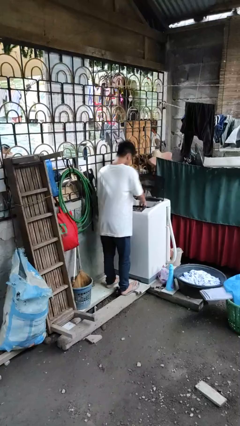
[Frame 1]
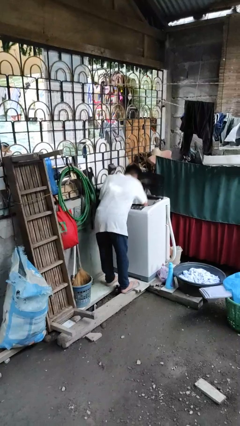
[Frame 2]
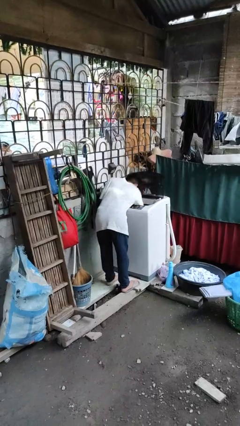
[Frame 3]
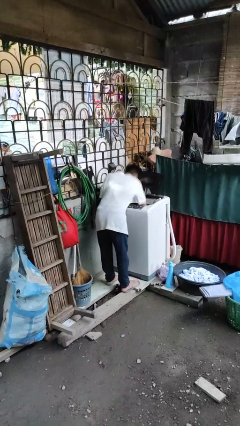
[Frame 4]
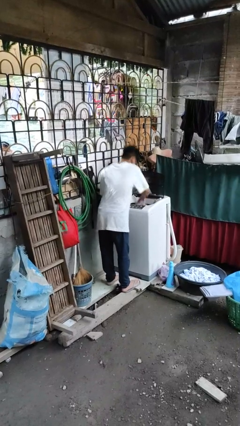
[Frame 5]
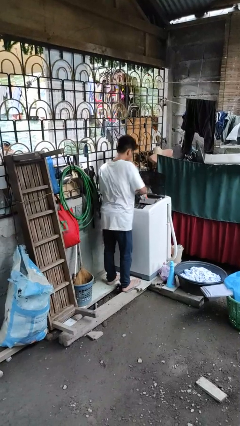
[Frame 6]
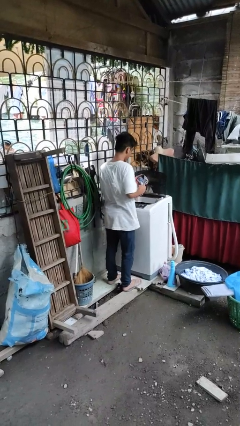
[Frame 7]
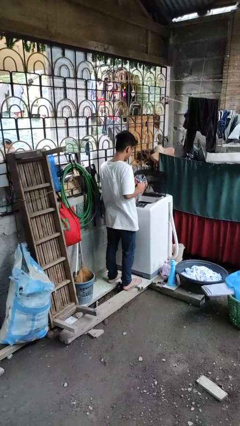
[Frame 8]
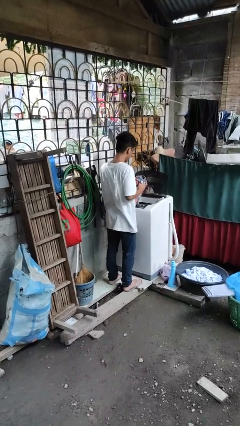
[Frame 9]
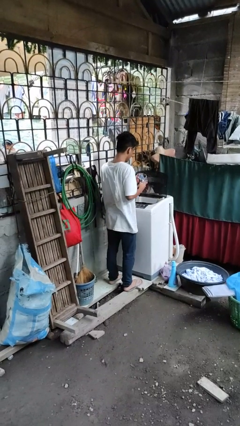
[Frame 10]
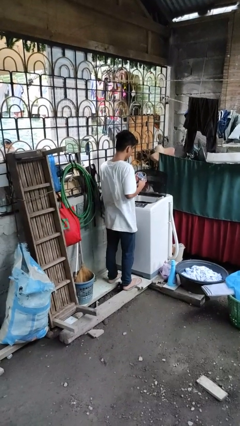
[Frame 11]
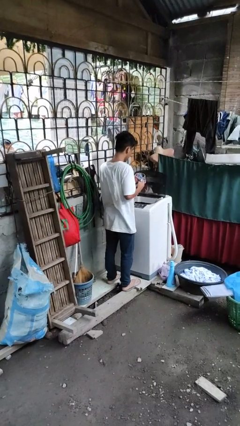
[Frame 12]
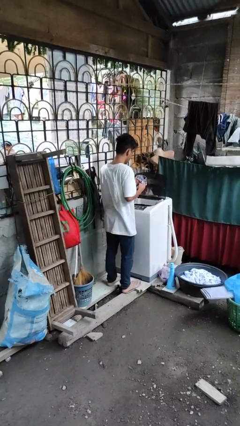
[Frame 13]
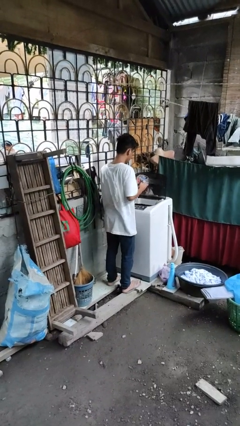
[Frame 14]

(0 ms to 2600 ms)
person unloads clotheswasher

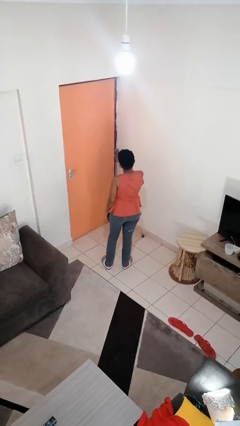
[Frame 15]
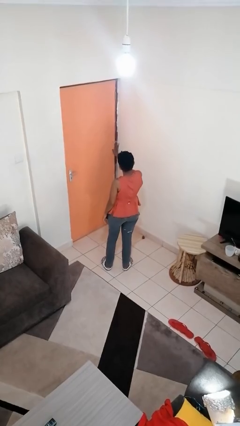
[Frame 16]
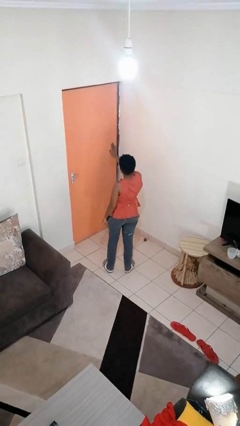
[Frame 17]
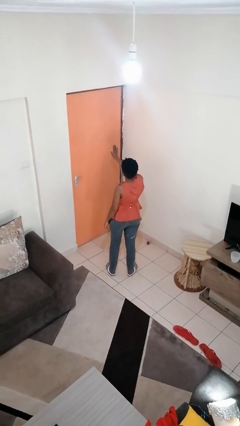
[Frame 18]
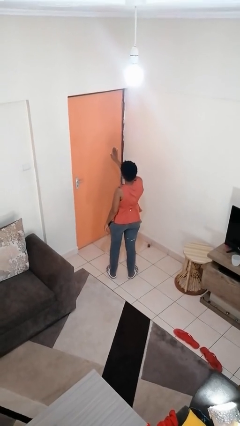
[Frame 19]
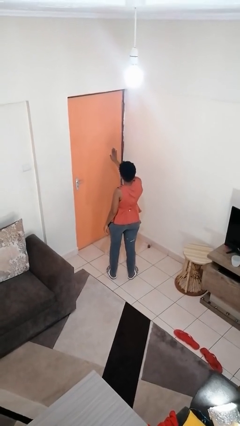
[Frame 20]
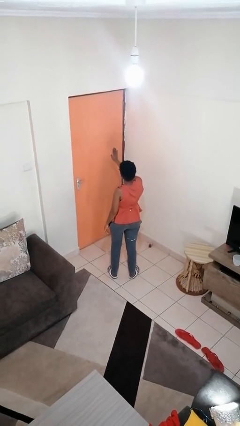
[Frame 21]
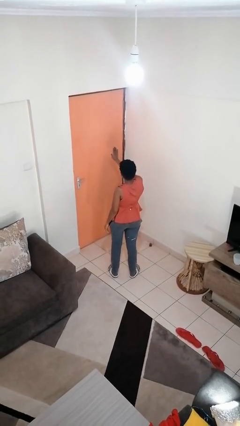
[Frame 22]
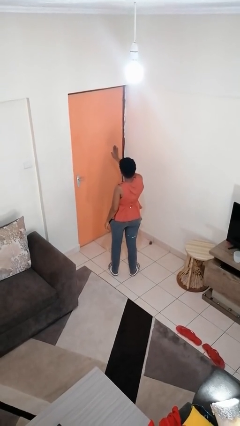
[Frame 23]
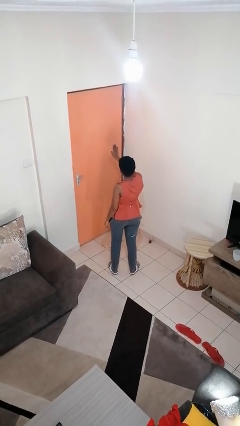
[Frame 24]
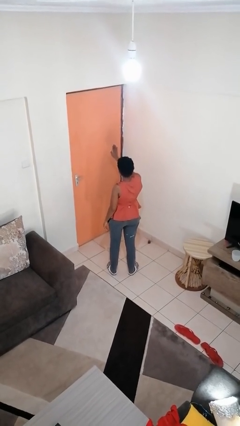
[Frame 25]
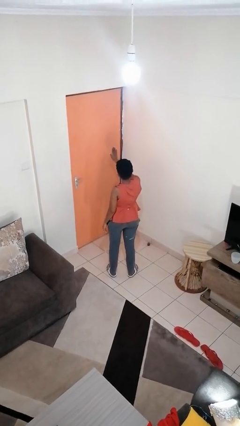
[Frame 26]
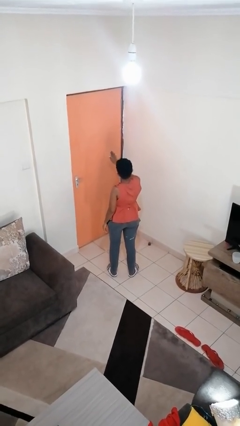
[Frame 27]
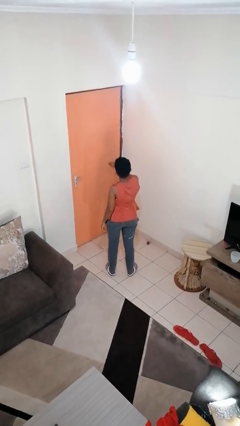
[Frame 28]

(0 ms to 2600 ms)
person gestures stop

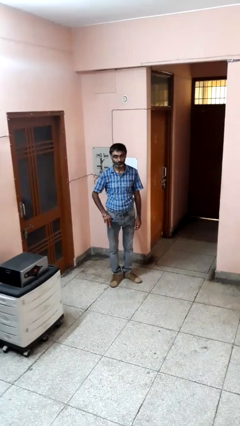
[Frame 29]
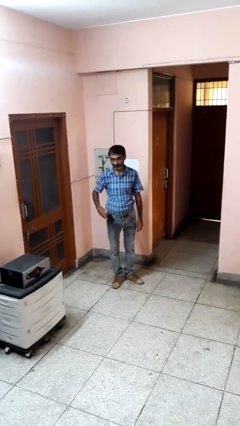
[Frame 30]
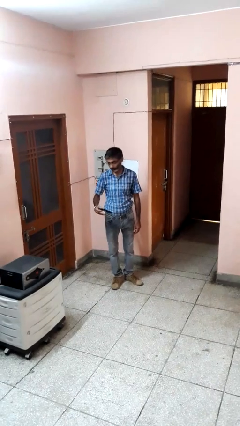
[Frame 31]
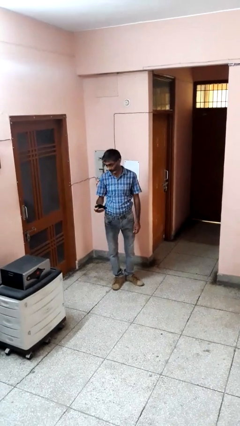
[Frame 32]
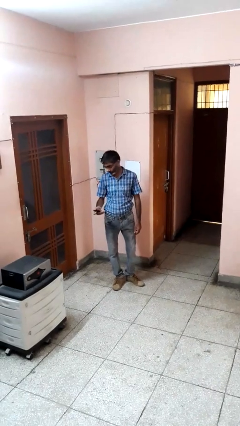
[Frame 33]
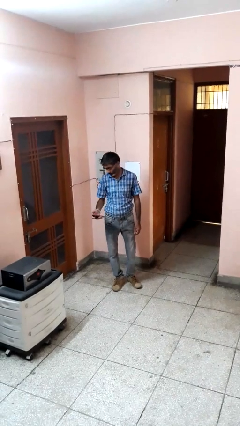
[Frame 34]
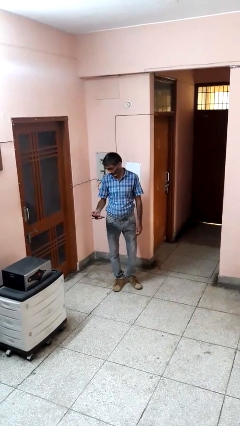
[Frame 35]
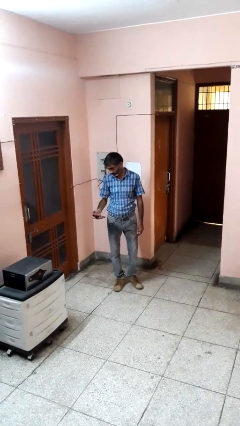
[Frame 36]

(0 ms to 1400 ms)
person takes phone from pocket

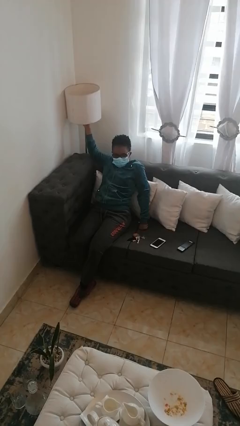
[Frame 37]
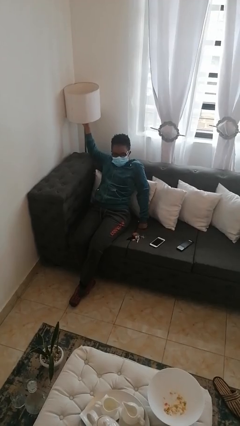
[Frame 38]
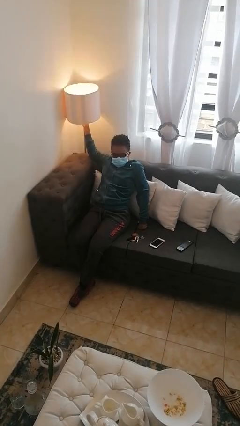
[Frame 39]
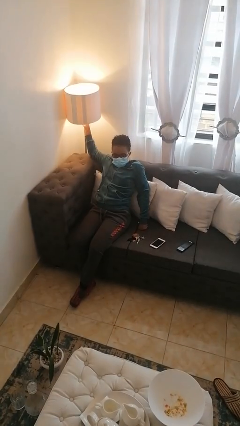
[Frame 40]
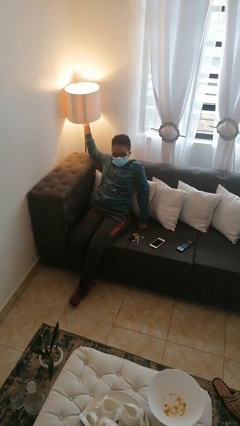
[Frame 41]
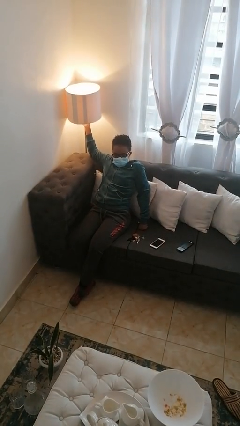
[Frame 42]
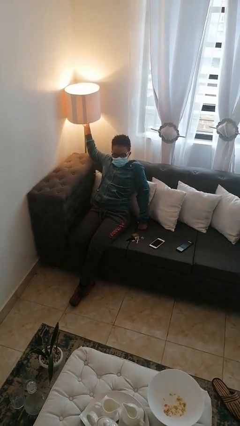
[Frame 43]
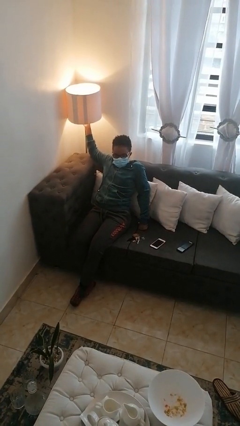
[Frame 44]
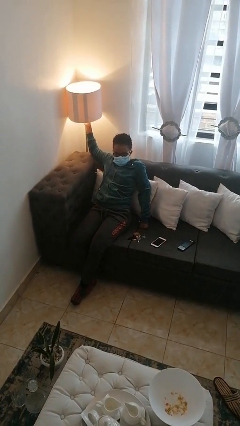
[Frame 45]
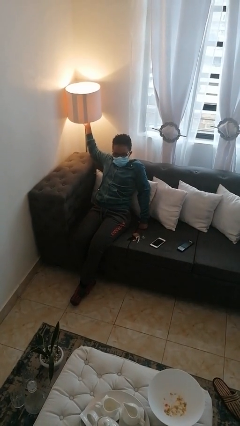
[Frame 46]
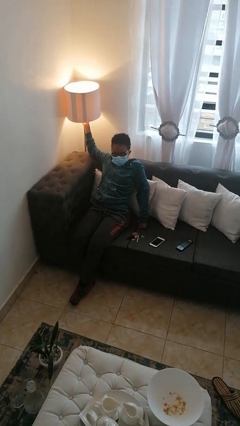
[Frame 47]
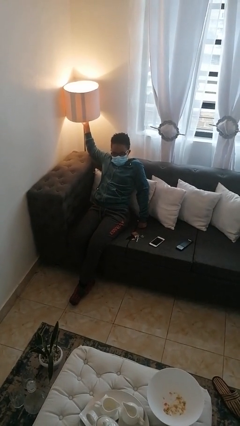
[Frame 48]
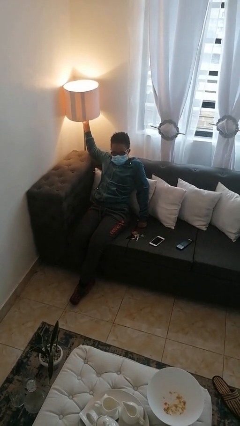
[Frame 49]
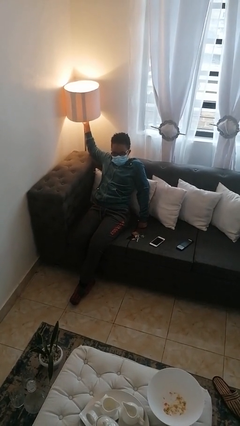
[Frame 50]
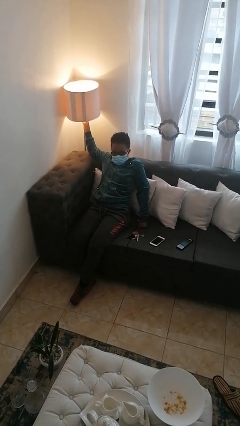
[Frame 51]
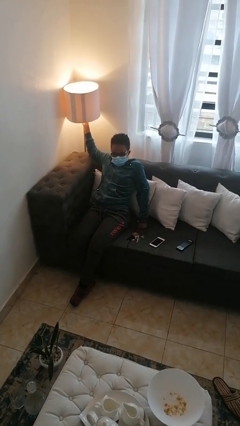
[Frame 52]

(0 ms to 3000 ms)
person turns on lamp

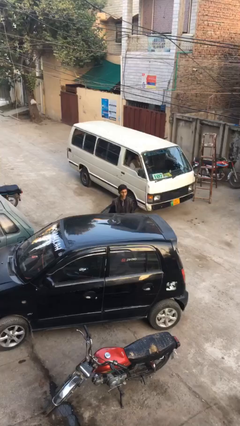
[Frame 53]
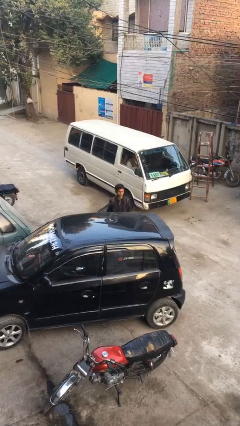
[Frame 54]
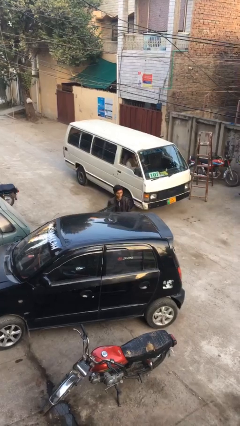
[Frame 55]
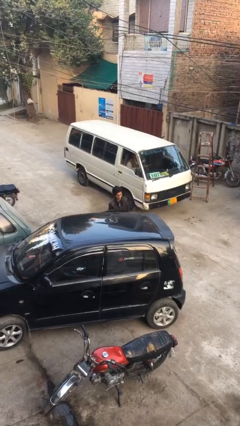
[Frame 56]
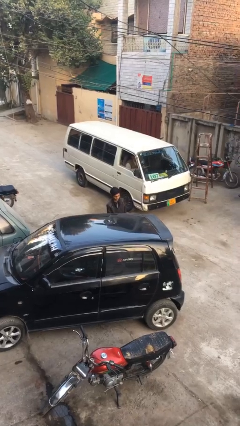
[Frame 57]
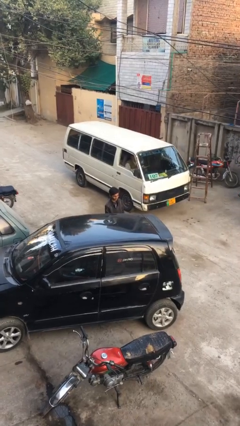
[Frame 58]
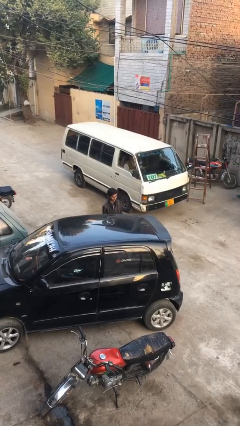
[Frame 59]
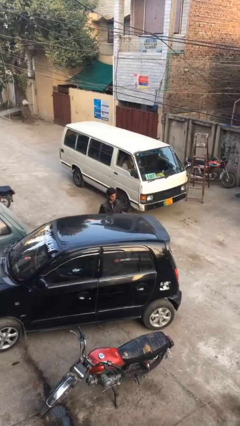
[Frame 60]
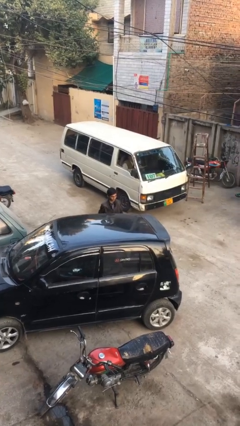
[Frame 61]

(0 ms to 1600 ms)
person closes car door

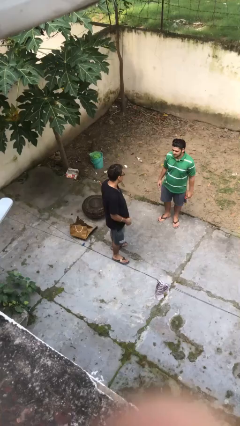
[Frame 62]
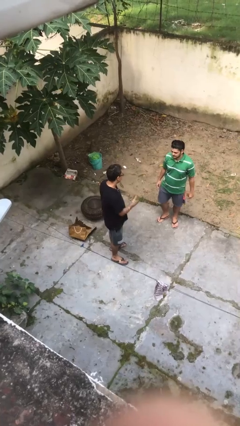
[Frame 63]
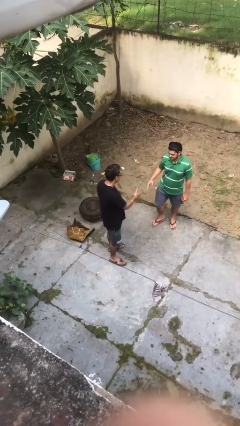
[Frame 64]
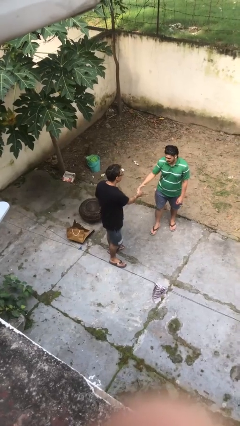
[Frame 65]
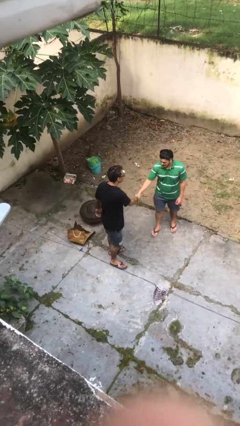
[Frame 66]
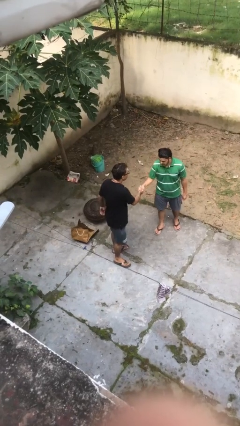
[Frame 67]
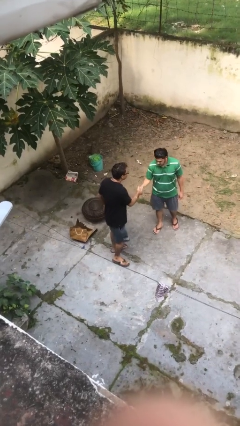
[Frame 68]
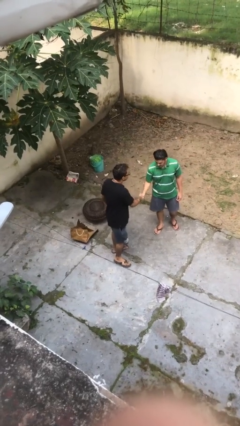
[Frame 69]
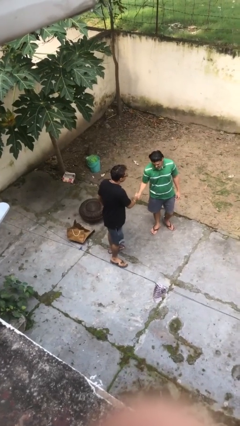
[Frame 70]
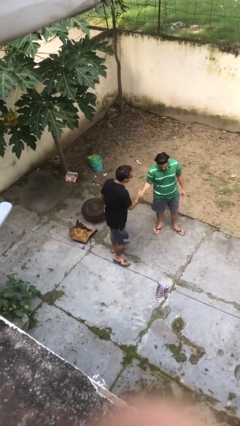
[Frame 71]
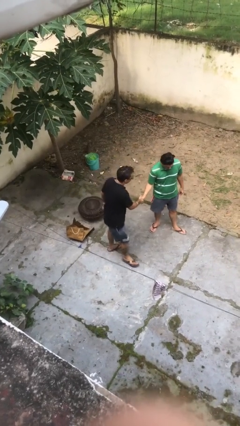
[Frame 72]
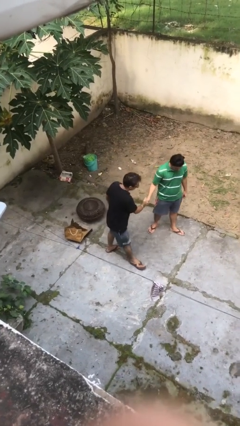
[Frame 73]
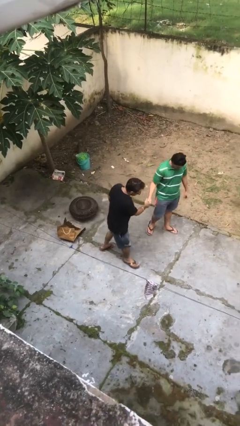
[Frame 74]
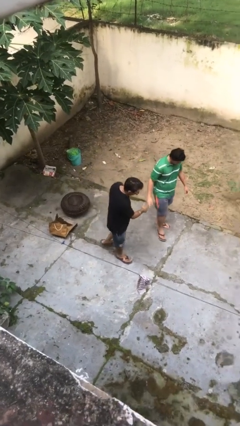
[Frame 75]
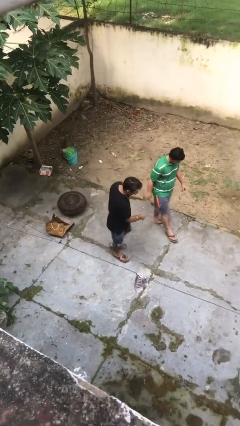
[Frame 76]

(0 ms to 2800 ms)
person shakes hand

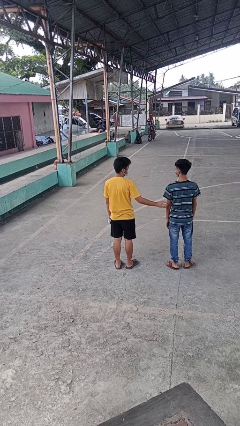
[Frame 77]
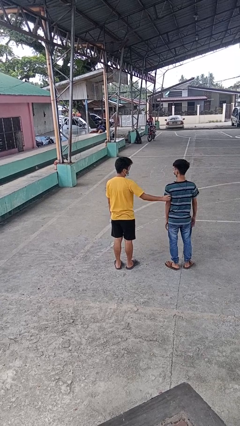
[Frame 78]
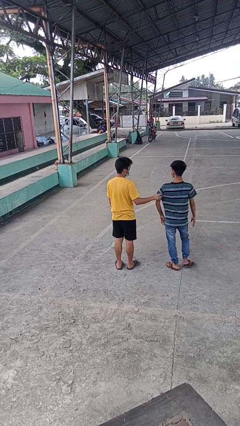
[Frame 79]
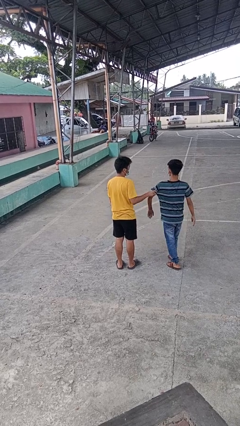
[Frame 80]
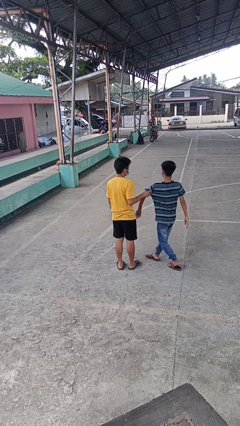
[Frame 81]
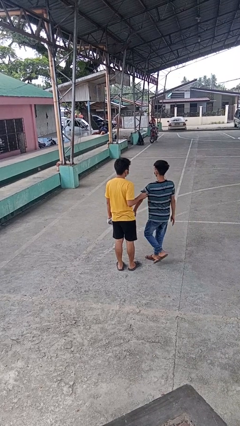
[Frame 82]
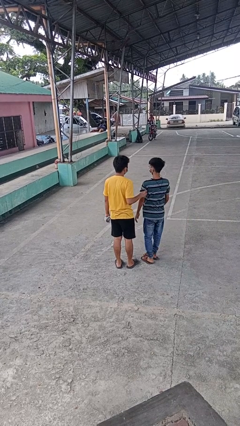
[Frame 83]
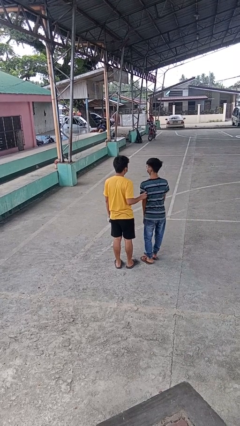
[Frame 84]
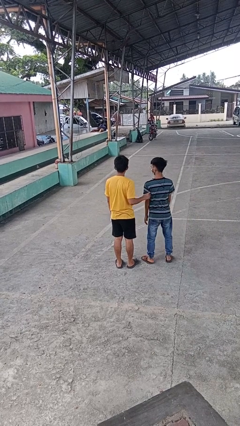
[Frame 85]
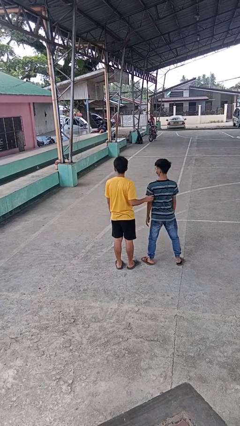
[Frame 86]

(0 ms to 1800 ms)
person grabs person by bicep

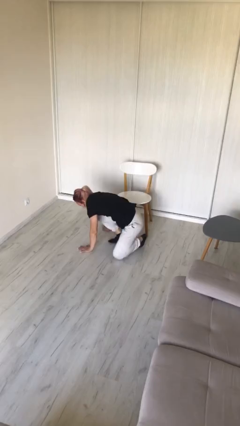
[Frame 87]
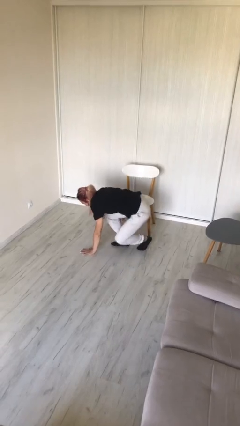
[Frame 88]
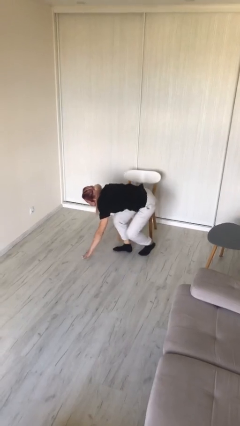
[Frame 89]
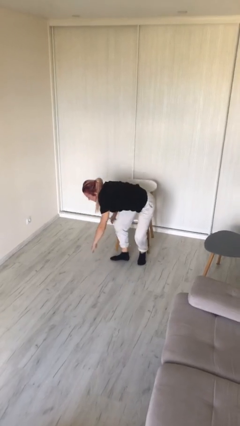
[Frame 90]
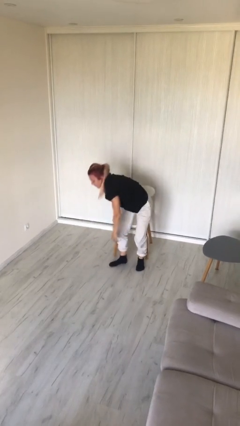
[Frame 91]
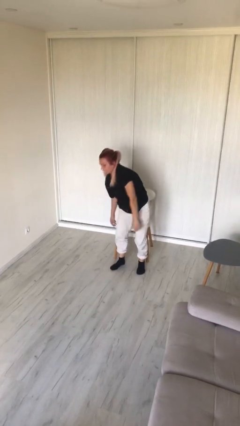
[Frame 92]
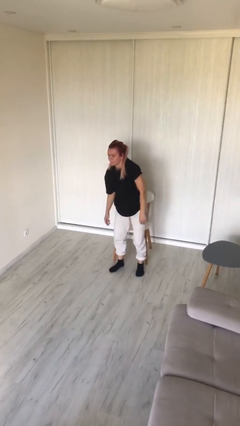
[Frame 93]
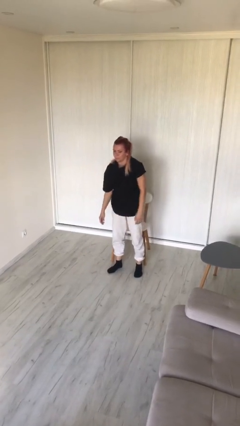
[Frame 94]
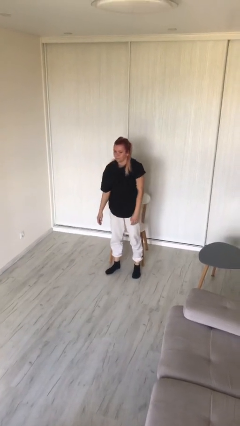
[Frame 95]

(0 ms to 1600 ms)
person stands up from floor
